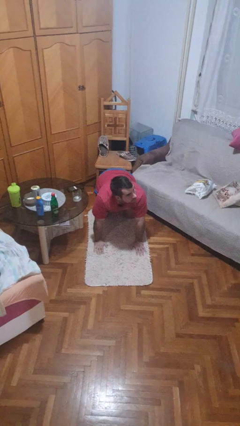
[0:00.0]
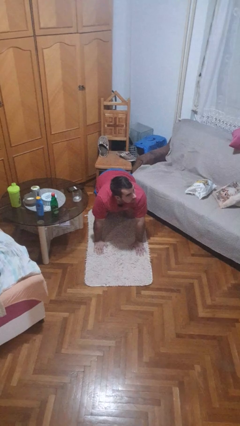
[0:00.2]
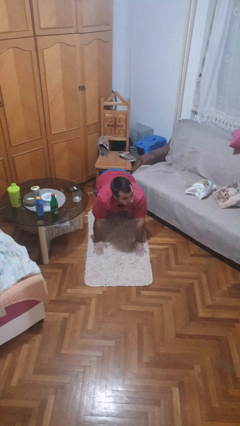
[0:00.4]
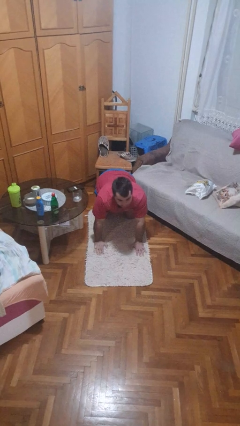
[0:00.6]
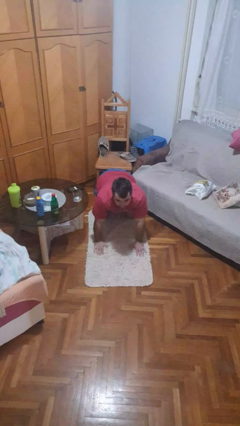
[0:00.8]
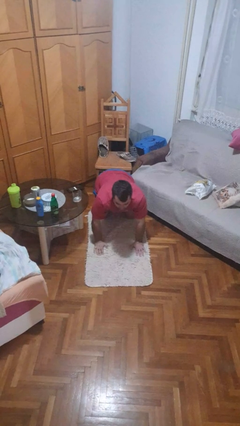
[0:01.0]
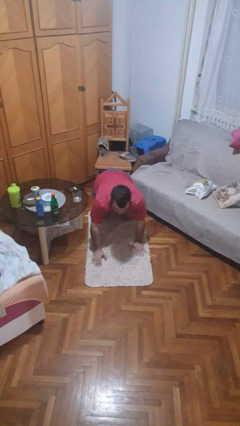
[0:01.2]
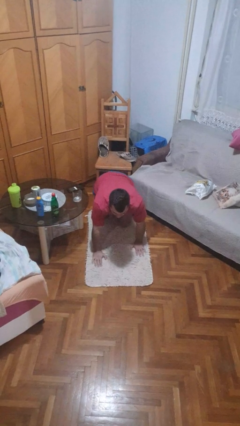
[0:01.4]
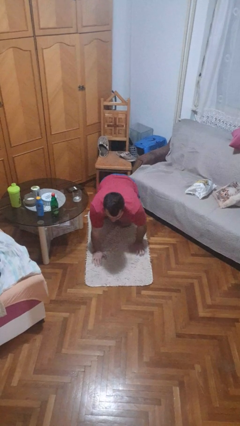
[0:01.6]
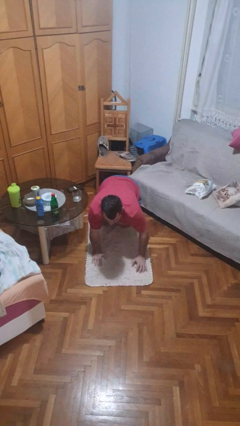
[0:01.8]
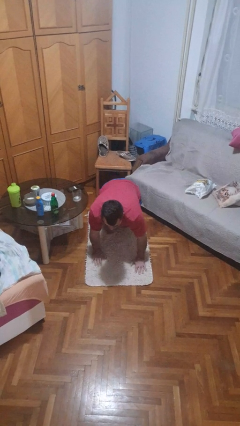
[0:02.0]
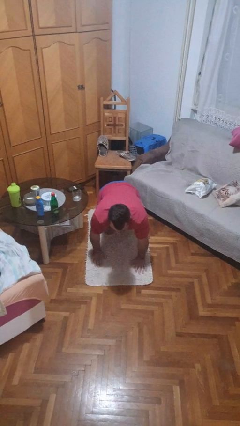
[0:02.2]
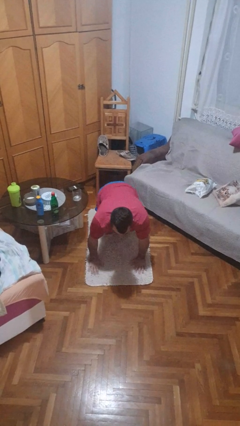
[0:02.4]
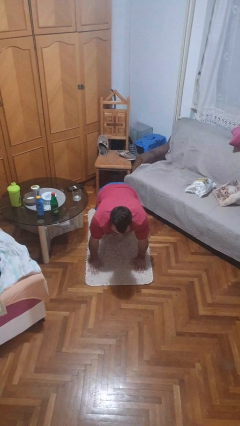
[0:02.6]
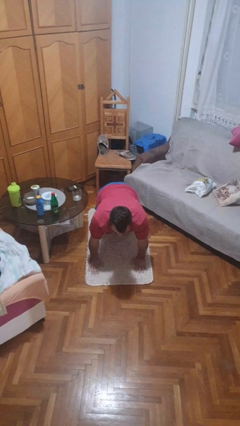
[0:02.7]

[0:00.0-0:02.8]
person crawls

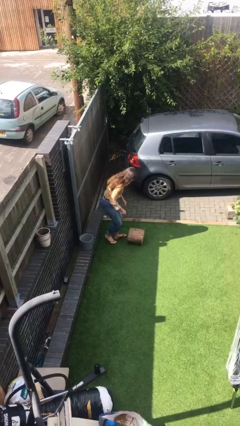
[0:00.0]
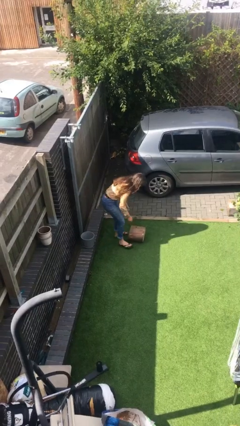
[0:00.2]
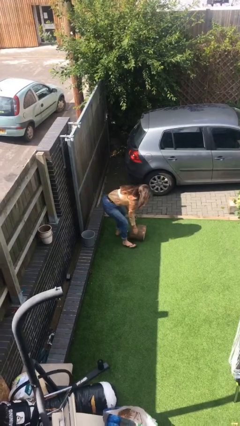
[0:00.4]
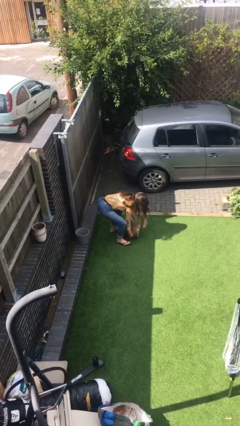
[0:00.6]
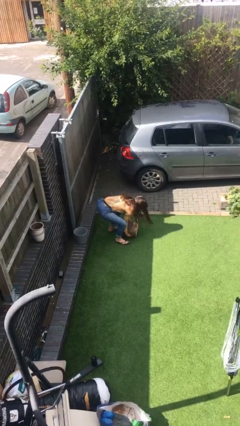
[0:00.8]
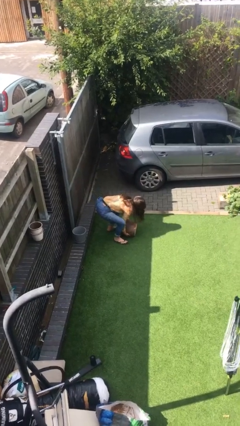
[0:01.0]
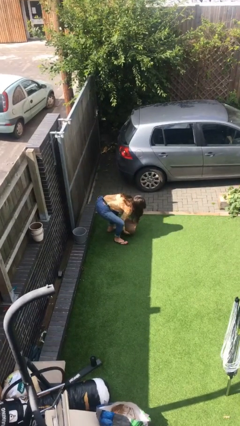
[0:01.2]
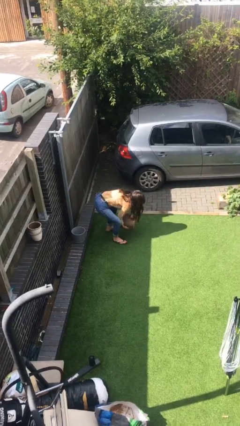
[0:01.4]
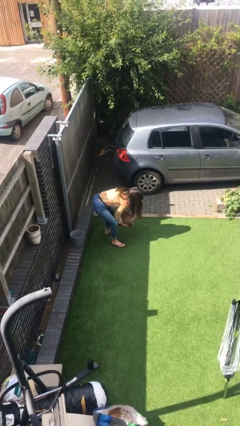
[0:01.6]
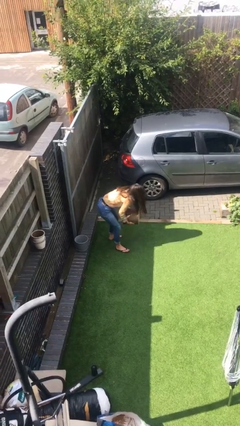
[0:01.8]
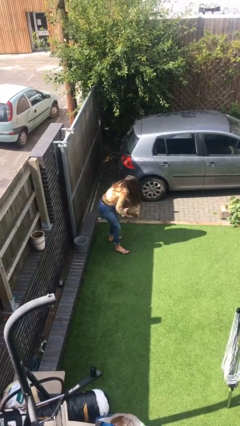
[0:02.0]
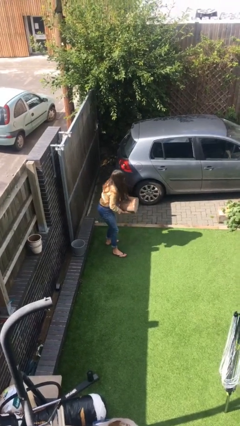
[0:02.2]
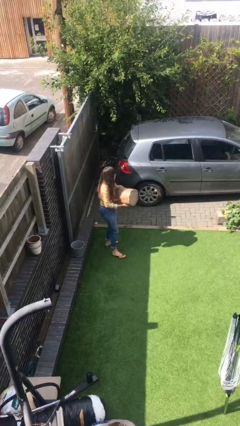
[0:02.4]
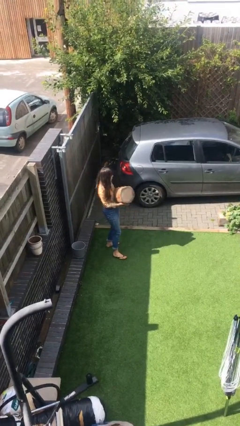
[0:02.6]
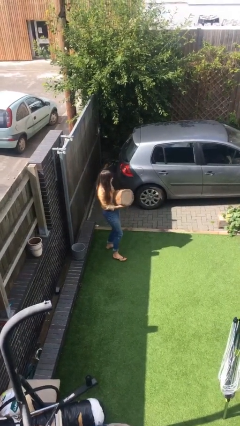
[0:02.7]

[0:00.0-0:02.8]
person picks up object from floor

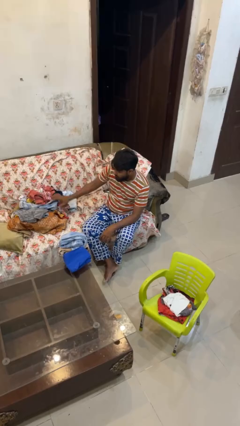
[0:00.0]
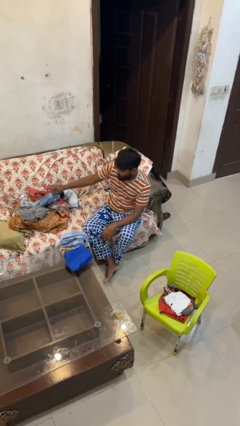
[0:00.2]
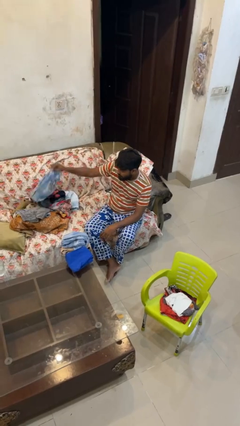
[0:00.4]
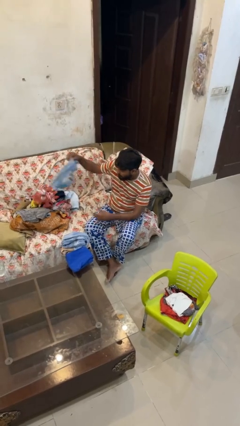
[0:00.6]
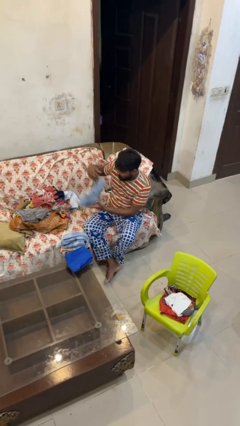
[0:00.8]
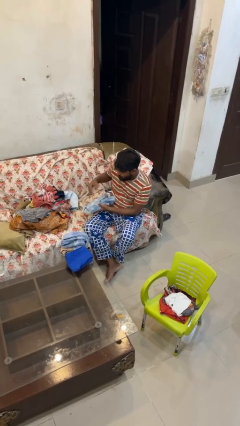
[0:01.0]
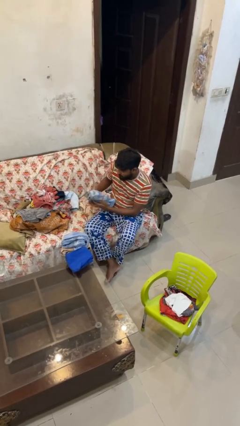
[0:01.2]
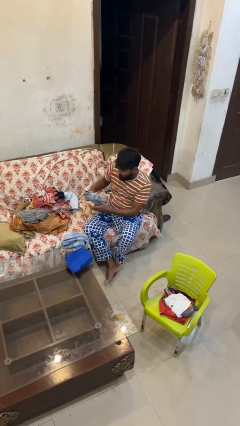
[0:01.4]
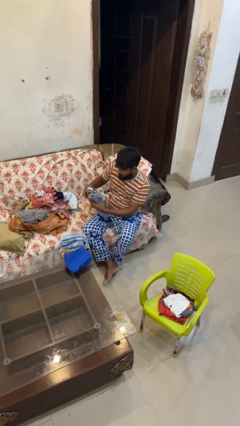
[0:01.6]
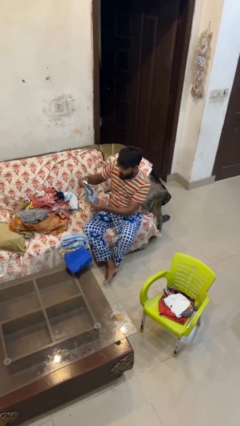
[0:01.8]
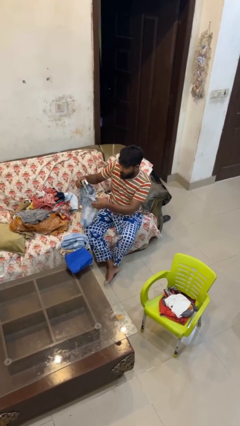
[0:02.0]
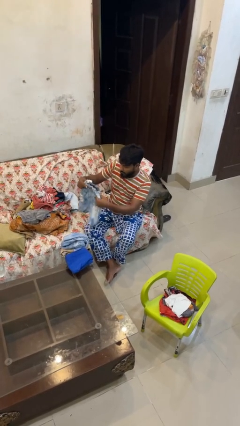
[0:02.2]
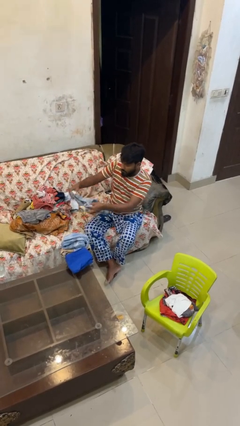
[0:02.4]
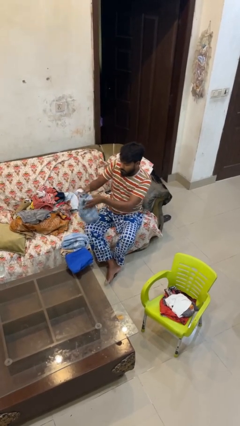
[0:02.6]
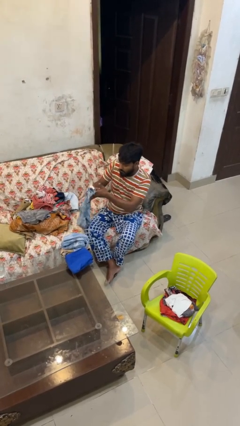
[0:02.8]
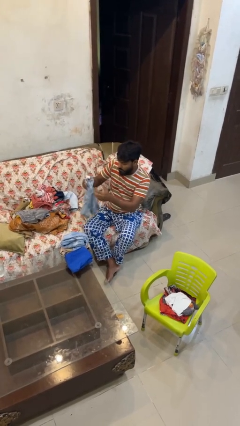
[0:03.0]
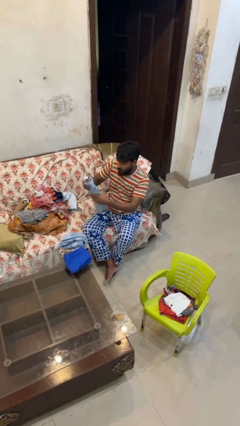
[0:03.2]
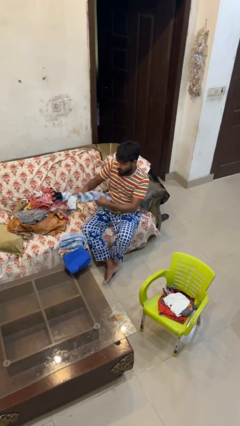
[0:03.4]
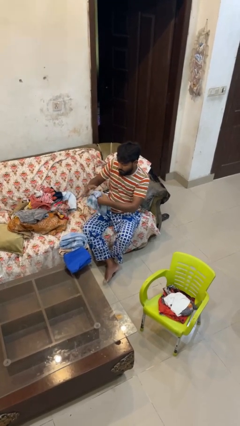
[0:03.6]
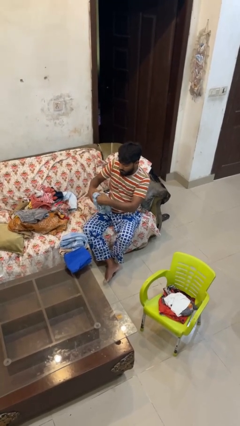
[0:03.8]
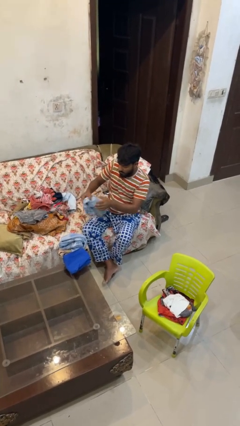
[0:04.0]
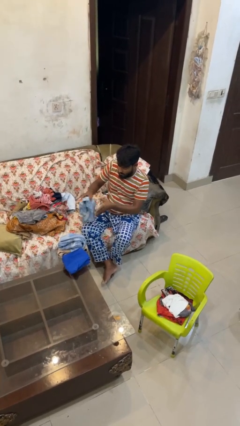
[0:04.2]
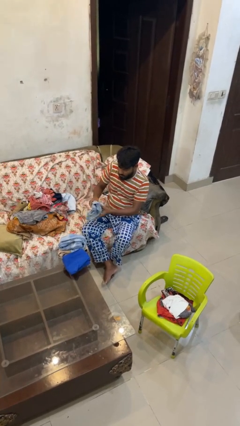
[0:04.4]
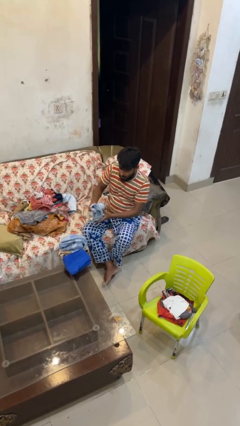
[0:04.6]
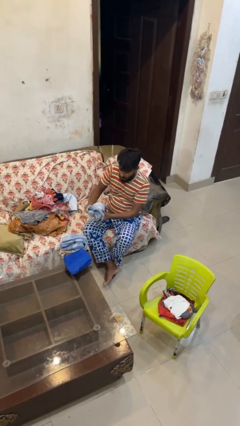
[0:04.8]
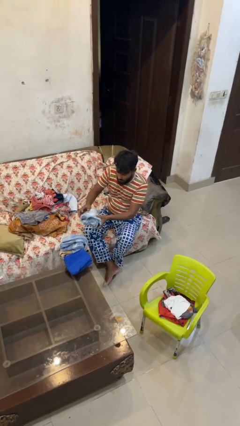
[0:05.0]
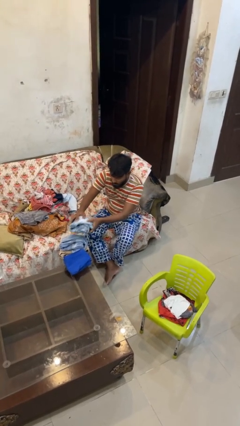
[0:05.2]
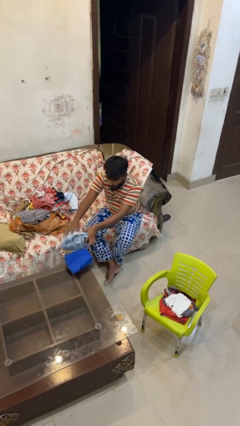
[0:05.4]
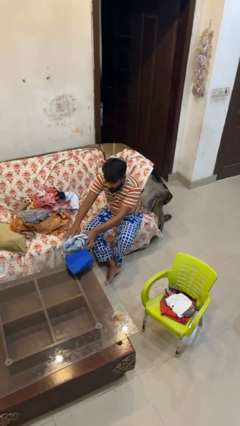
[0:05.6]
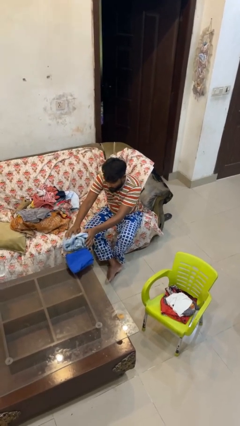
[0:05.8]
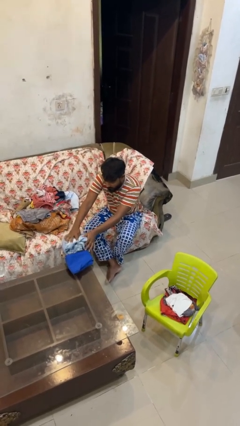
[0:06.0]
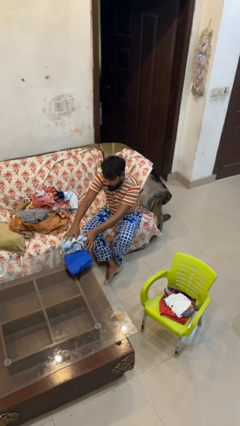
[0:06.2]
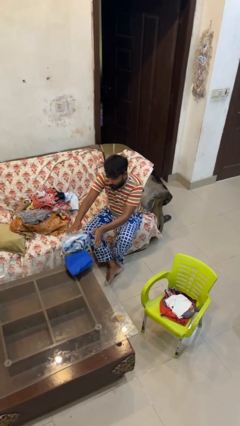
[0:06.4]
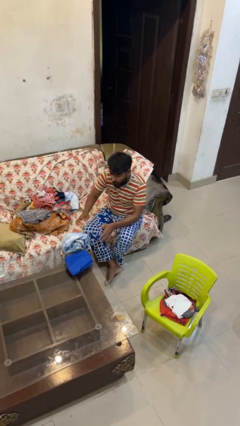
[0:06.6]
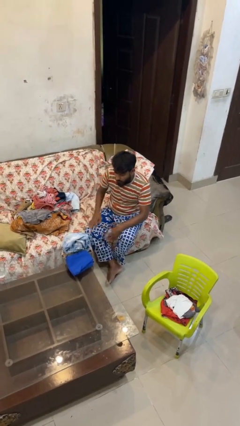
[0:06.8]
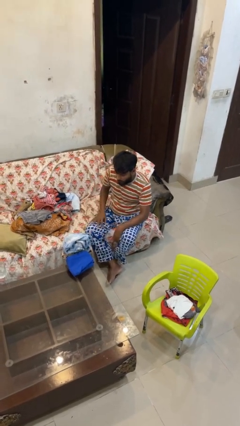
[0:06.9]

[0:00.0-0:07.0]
person folds pants

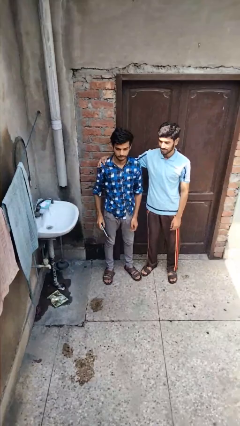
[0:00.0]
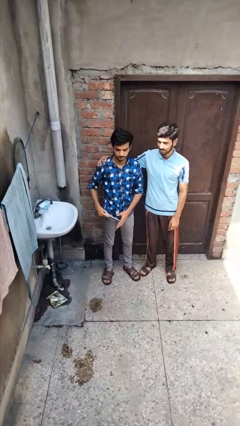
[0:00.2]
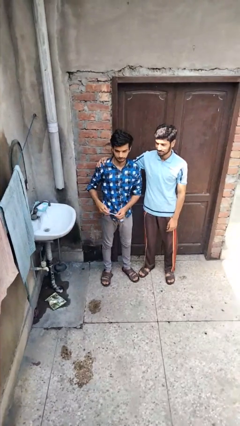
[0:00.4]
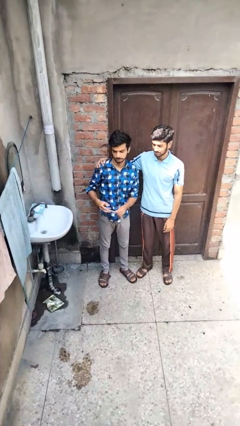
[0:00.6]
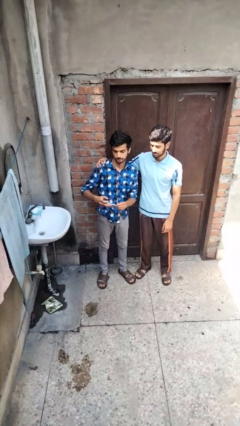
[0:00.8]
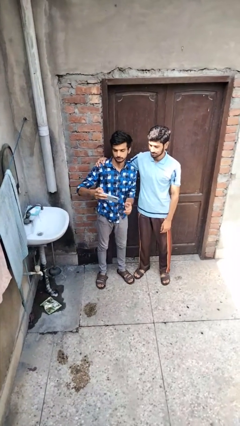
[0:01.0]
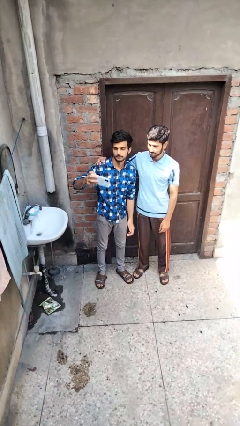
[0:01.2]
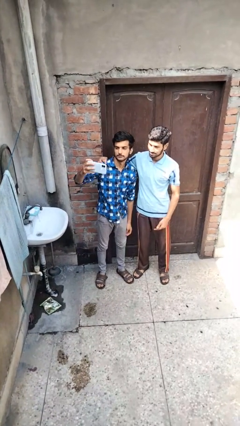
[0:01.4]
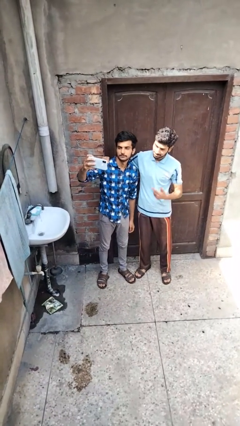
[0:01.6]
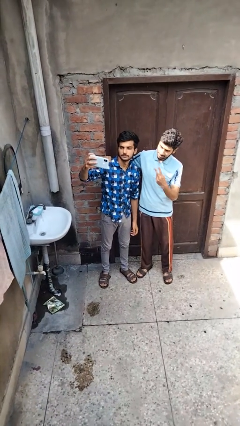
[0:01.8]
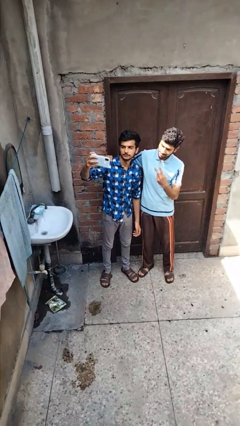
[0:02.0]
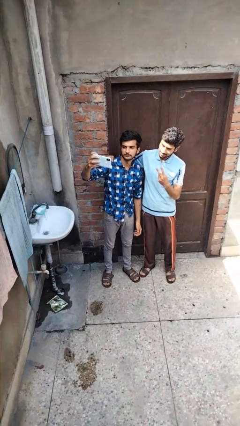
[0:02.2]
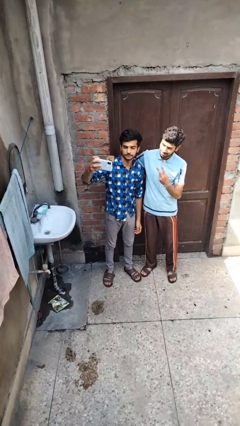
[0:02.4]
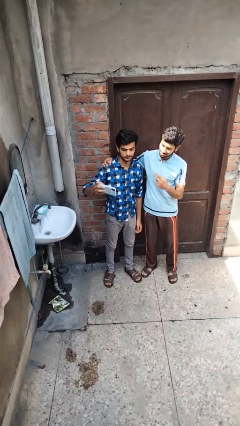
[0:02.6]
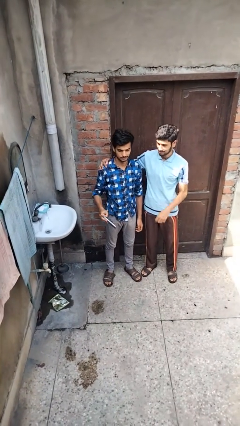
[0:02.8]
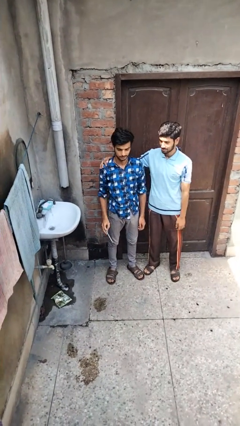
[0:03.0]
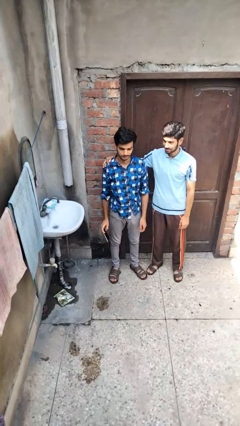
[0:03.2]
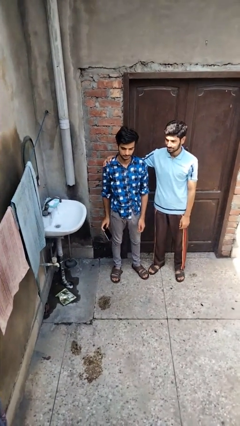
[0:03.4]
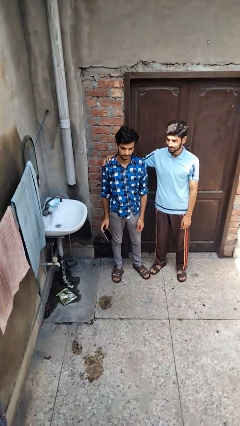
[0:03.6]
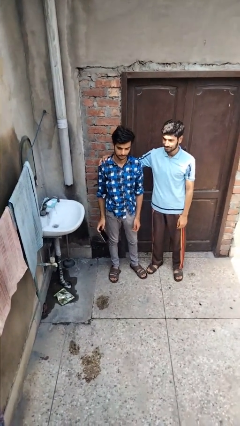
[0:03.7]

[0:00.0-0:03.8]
person takes selfie with person

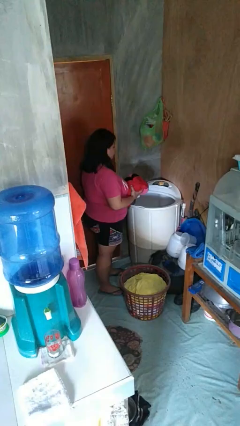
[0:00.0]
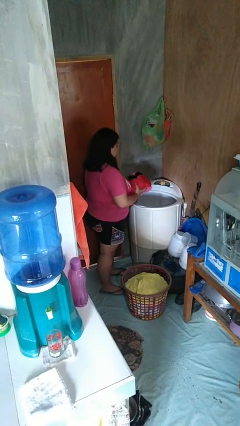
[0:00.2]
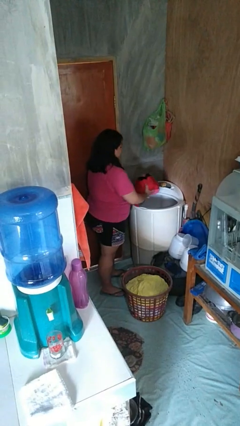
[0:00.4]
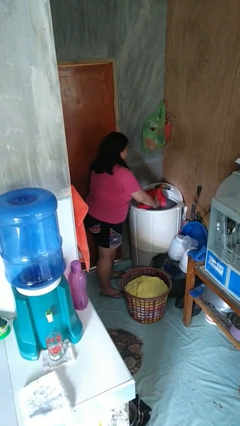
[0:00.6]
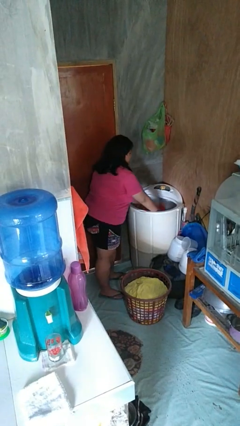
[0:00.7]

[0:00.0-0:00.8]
person loads clotheswasher

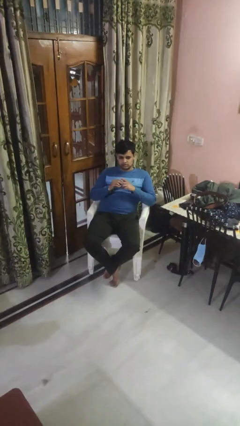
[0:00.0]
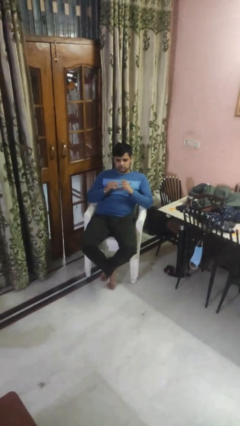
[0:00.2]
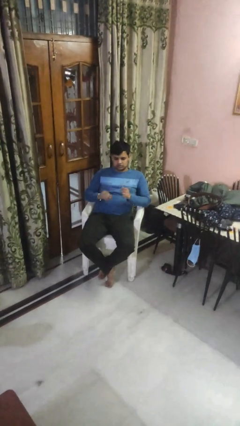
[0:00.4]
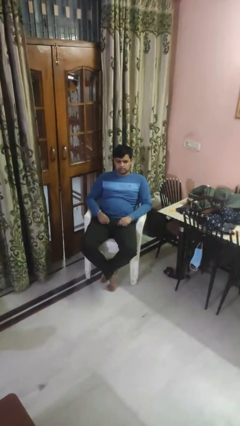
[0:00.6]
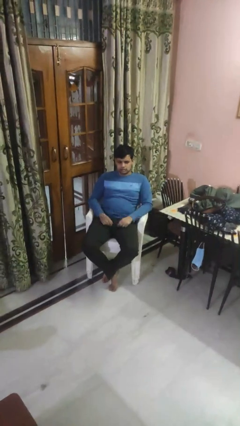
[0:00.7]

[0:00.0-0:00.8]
person takes off ring
